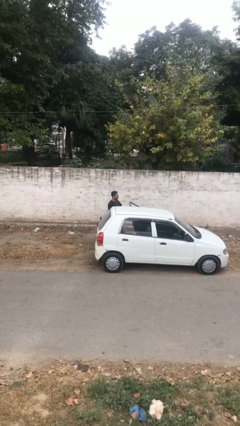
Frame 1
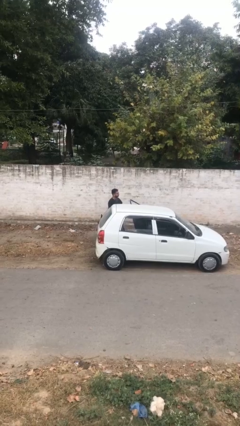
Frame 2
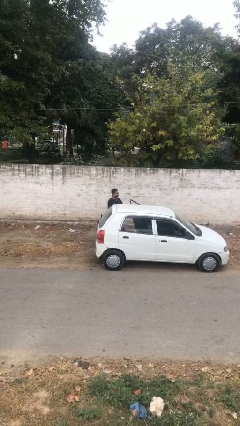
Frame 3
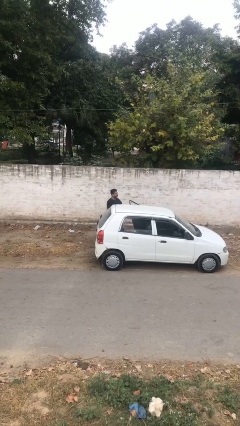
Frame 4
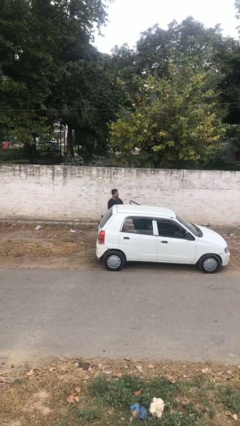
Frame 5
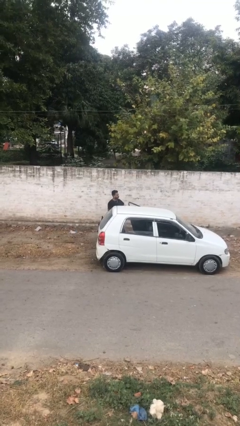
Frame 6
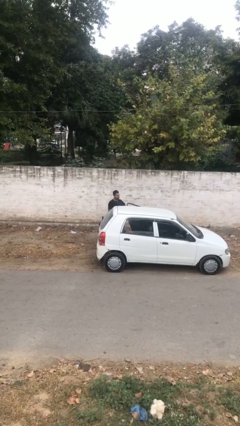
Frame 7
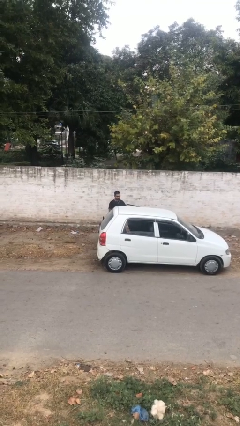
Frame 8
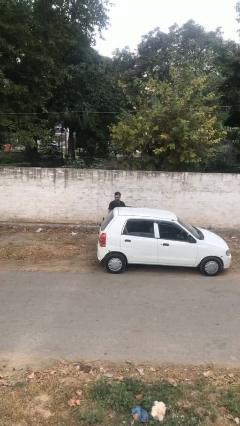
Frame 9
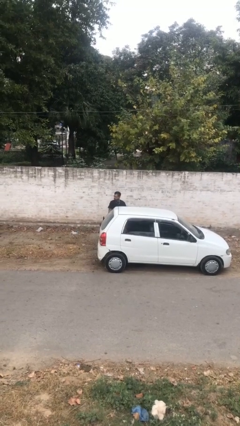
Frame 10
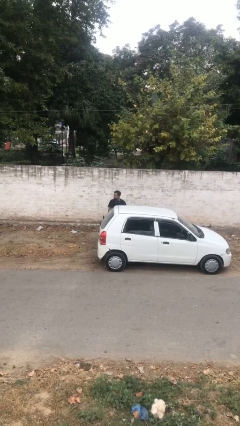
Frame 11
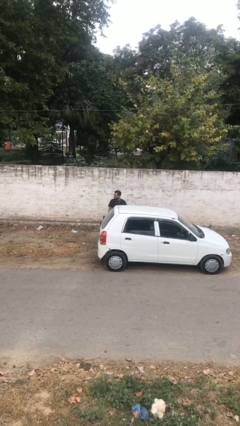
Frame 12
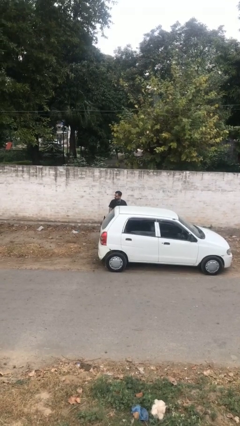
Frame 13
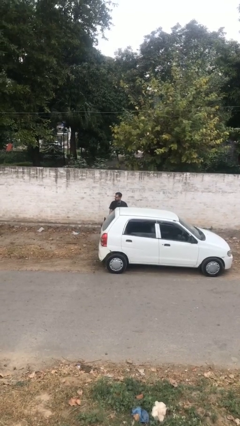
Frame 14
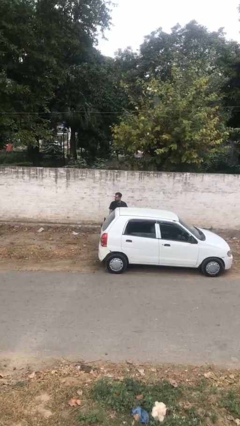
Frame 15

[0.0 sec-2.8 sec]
person closes car door

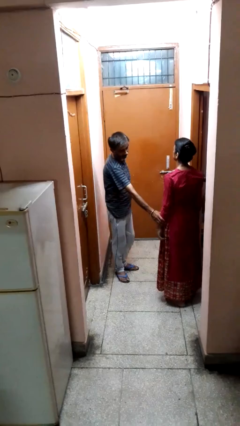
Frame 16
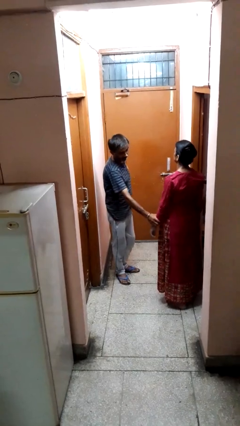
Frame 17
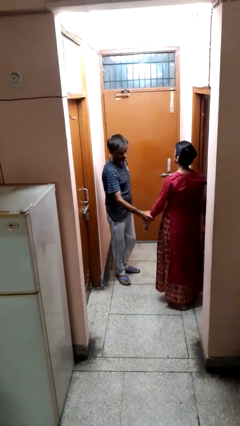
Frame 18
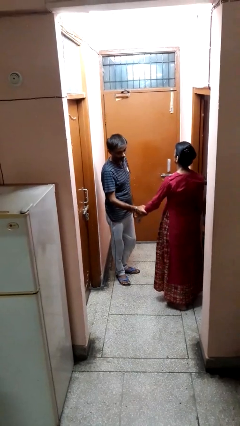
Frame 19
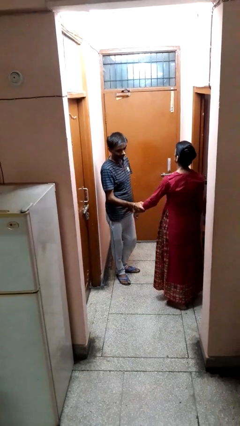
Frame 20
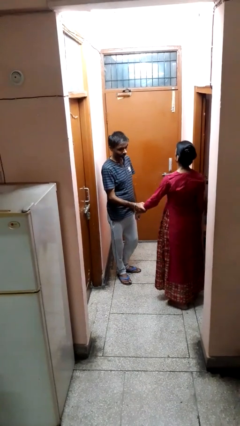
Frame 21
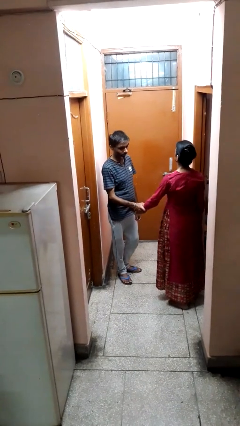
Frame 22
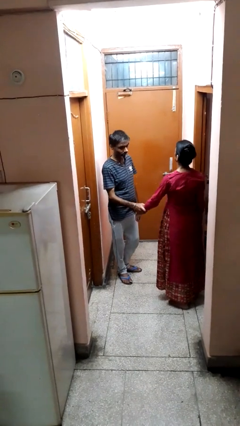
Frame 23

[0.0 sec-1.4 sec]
person grabs person by forearm

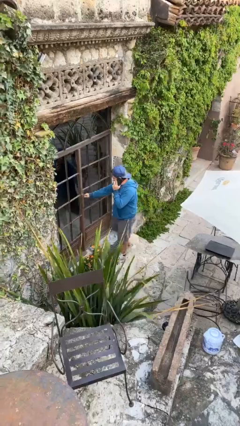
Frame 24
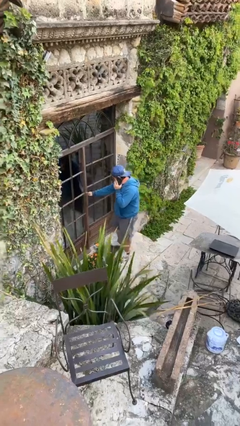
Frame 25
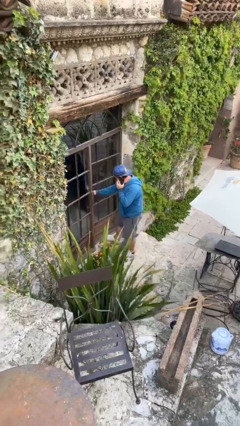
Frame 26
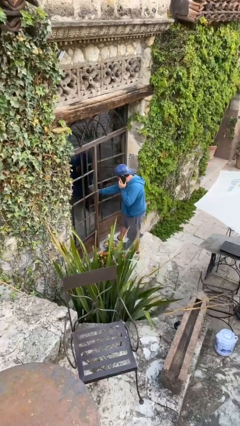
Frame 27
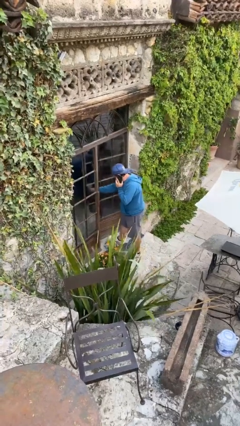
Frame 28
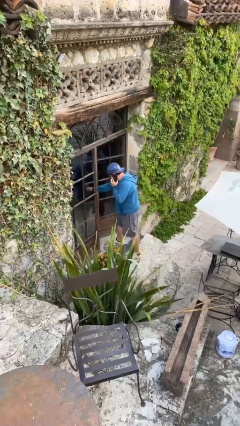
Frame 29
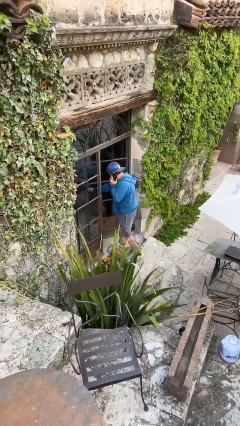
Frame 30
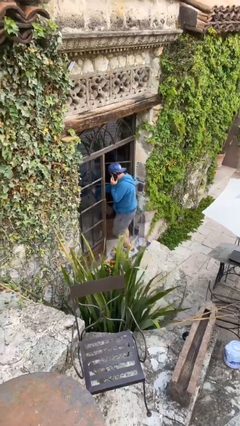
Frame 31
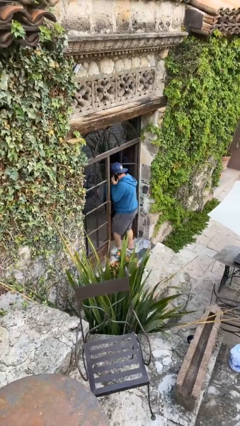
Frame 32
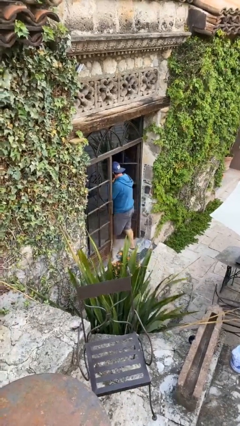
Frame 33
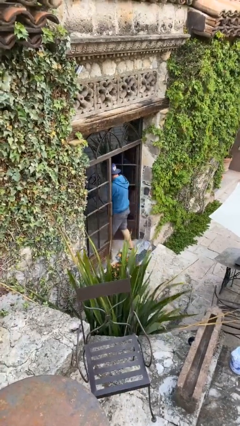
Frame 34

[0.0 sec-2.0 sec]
person opens facility door

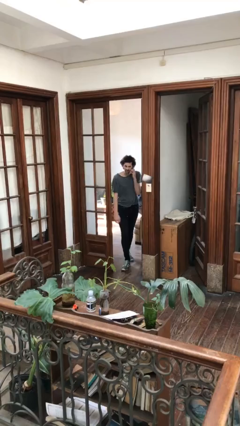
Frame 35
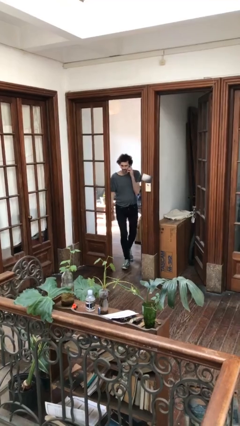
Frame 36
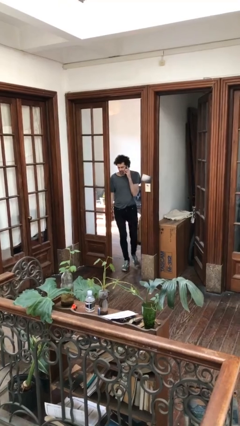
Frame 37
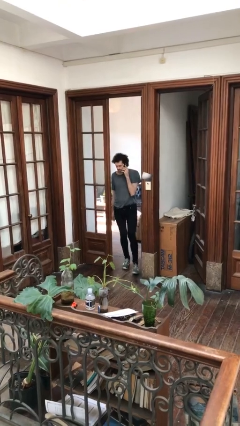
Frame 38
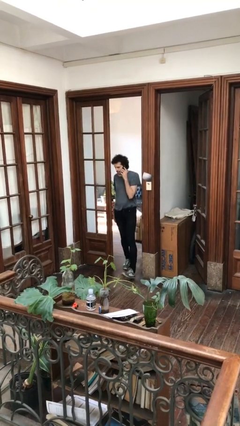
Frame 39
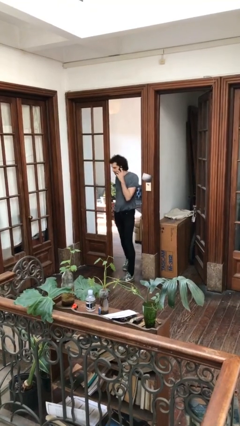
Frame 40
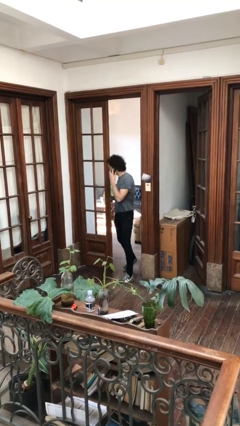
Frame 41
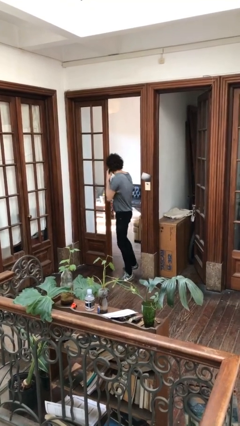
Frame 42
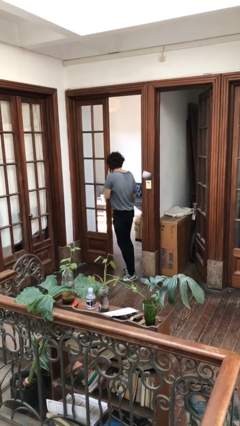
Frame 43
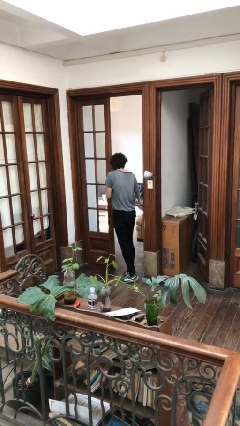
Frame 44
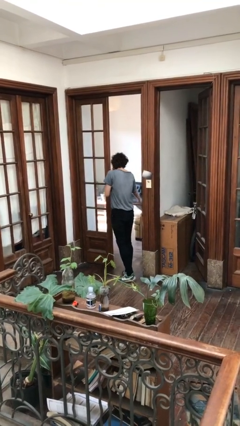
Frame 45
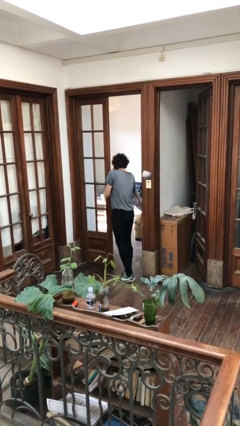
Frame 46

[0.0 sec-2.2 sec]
person enters scene through structure

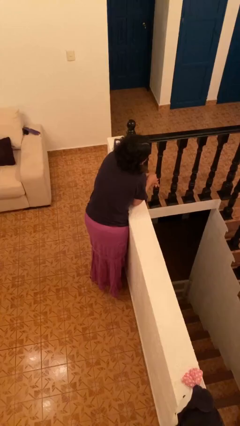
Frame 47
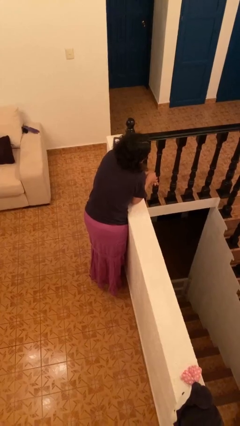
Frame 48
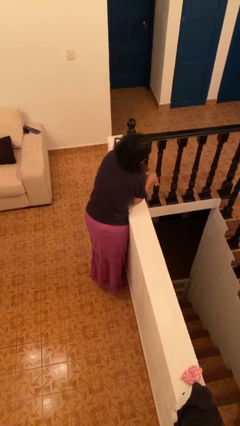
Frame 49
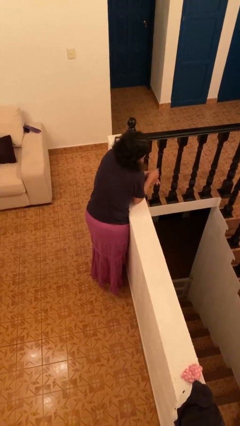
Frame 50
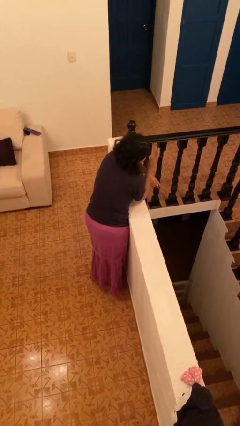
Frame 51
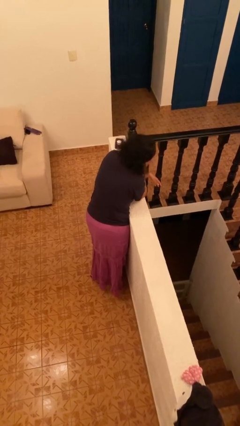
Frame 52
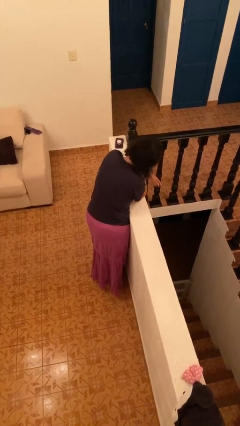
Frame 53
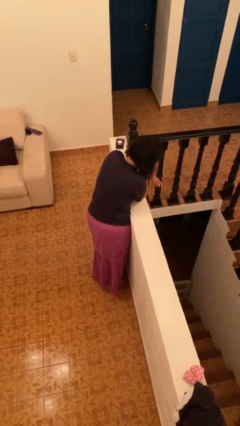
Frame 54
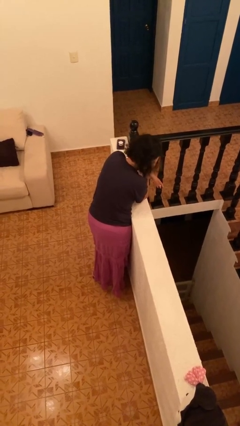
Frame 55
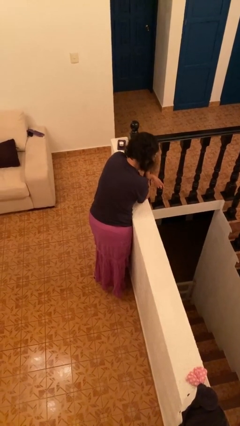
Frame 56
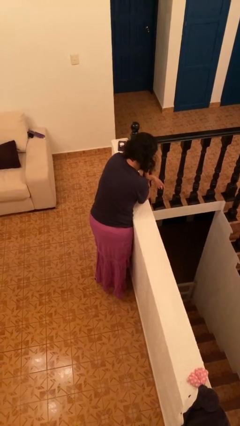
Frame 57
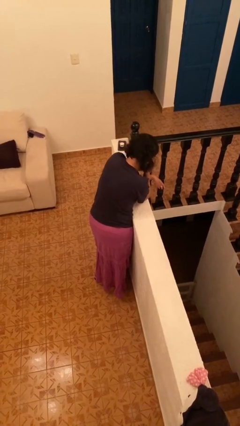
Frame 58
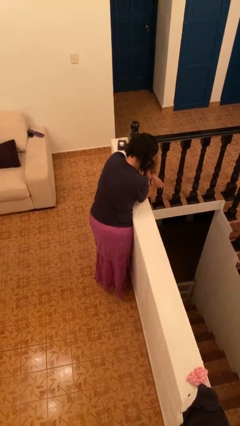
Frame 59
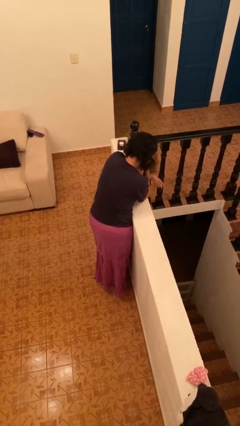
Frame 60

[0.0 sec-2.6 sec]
person covers face with hands

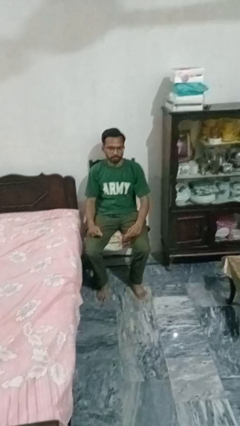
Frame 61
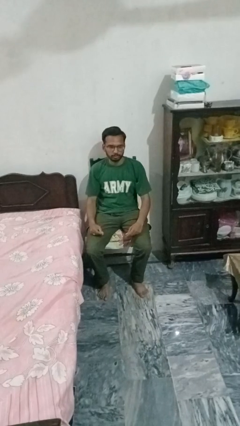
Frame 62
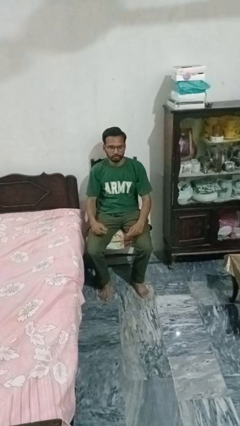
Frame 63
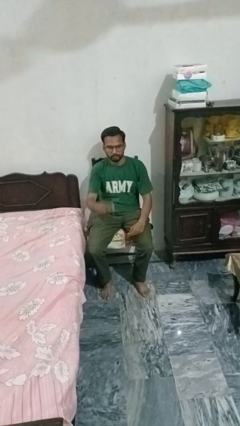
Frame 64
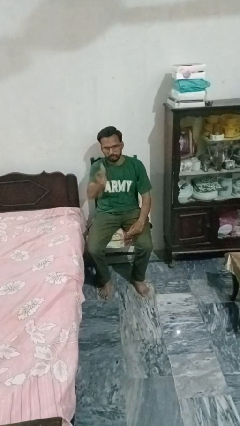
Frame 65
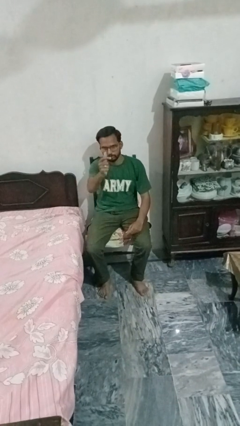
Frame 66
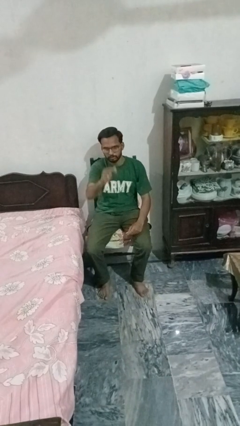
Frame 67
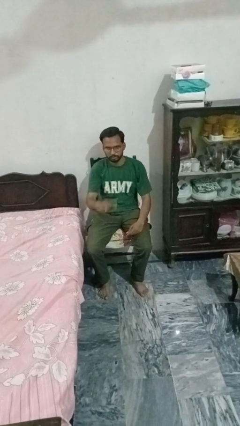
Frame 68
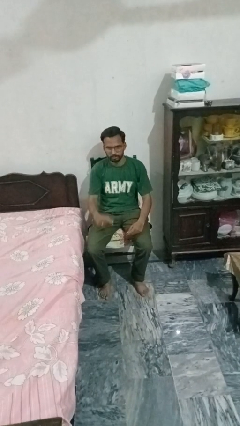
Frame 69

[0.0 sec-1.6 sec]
person snaps fingers

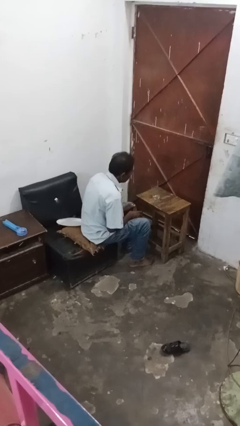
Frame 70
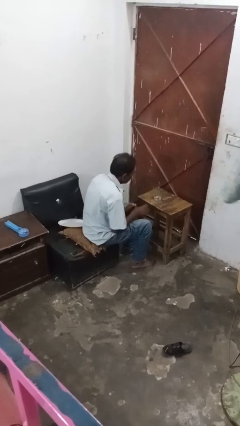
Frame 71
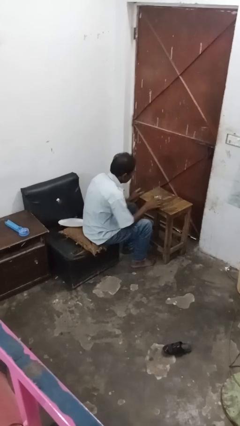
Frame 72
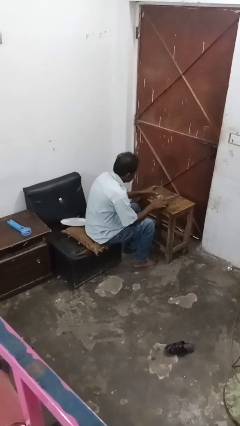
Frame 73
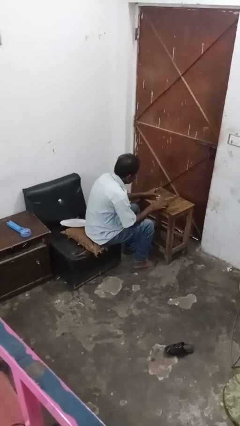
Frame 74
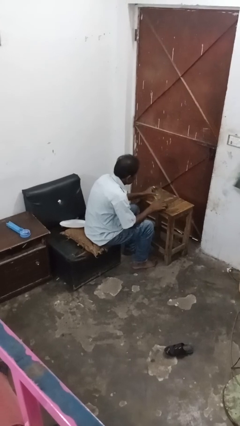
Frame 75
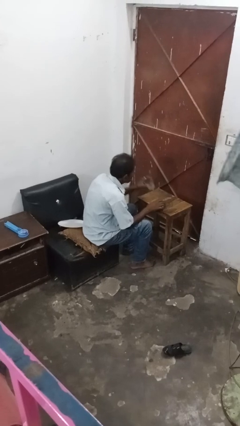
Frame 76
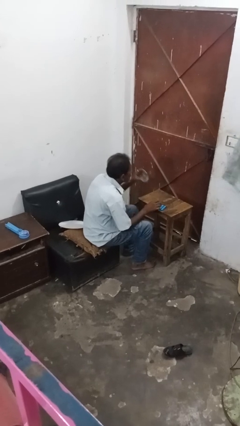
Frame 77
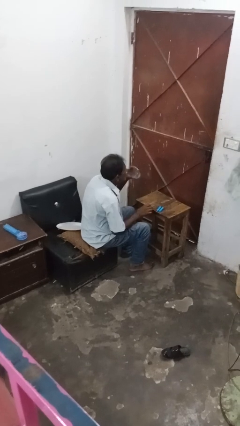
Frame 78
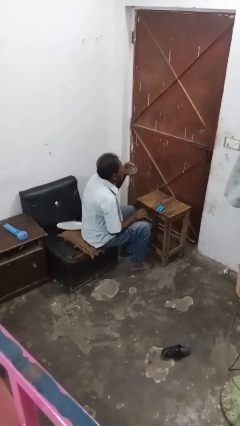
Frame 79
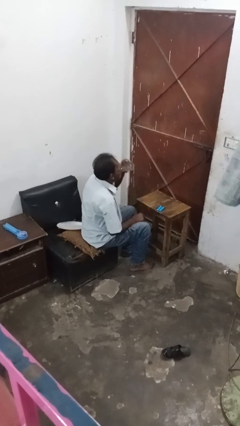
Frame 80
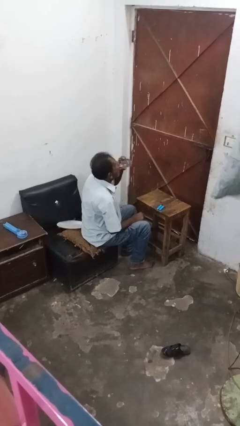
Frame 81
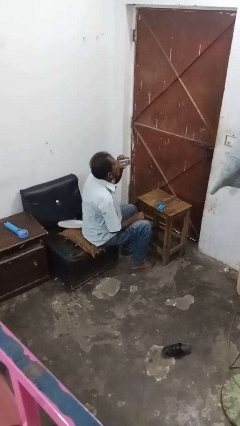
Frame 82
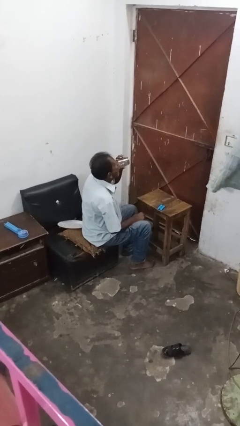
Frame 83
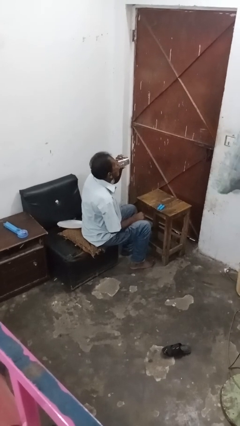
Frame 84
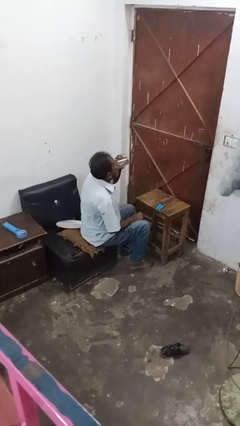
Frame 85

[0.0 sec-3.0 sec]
person drinks from cup

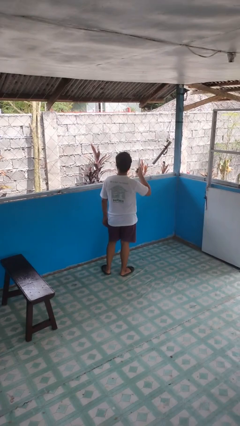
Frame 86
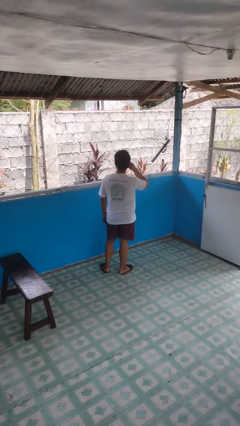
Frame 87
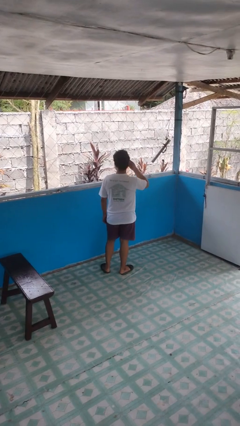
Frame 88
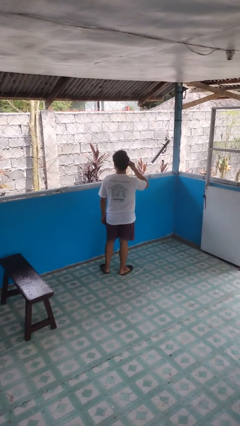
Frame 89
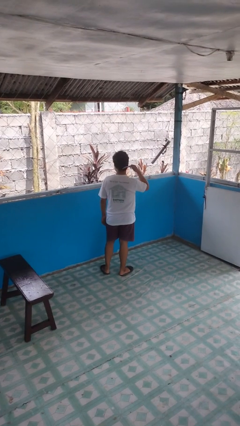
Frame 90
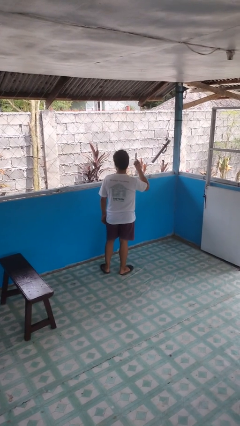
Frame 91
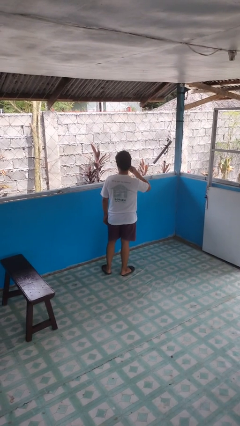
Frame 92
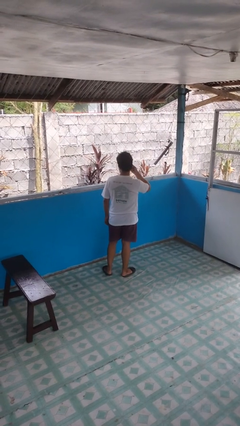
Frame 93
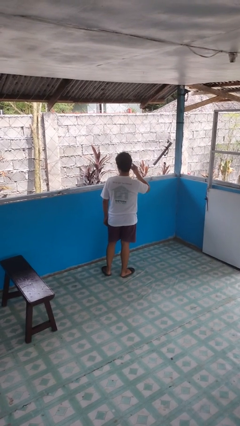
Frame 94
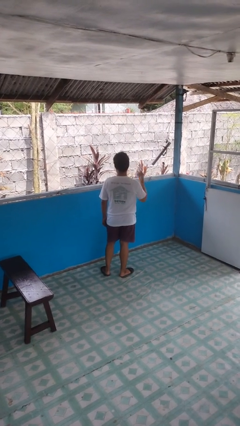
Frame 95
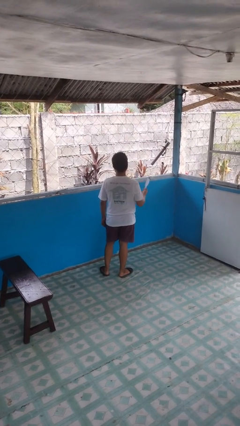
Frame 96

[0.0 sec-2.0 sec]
person brushes hair
